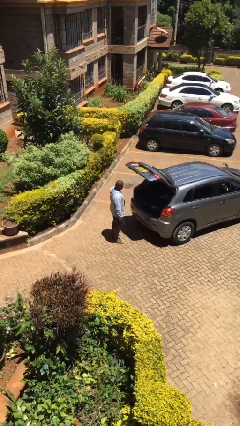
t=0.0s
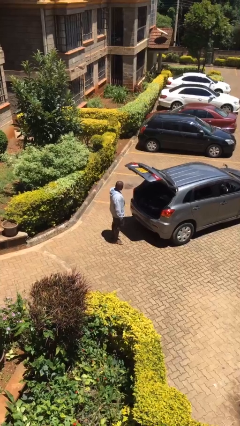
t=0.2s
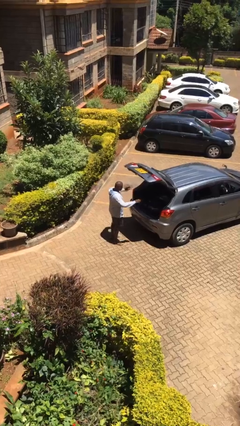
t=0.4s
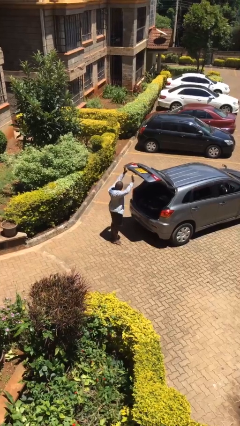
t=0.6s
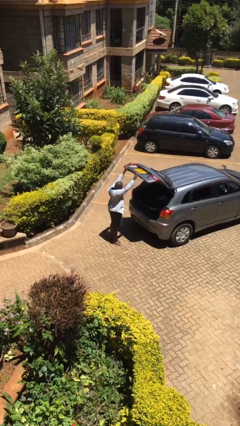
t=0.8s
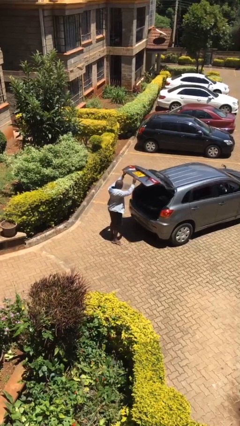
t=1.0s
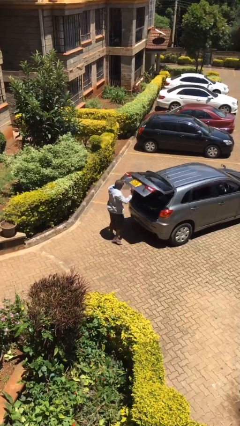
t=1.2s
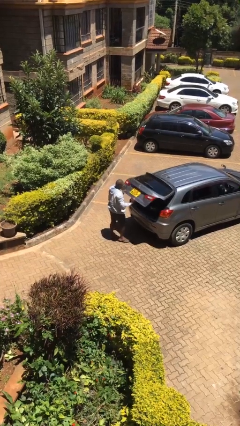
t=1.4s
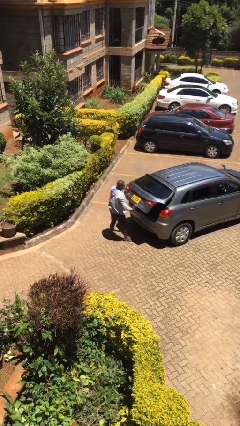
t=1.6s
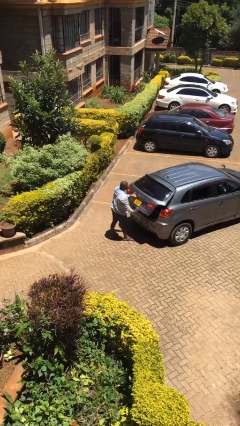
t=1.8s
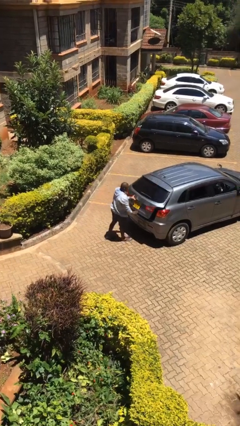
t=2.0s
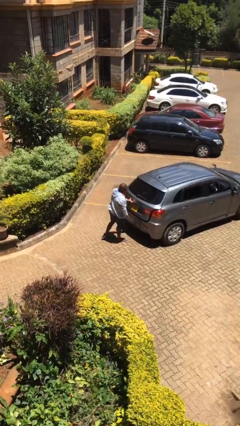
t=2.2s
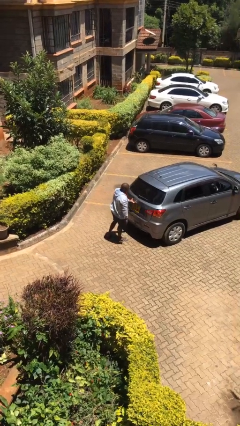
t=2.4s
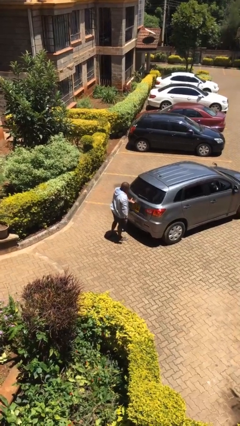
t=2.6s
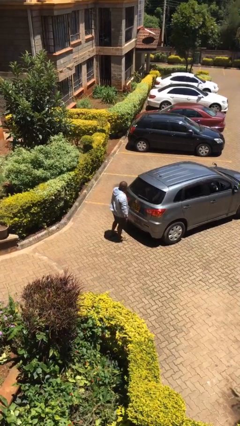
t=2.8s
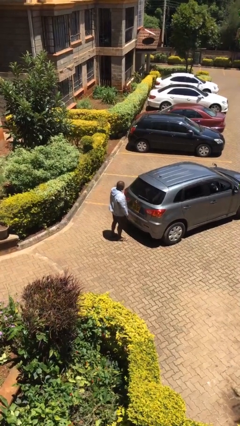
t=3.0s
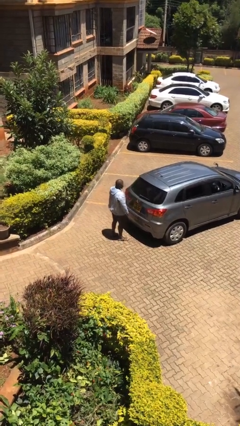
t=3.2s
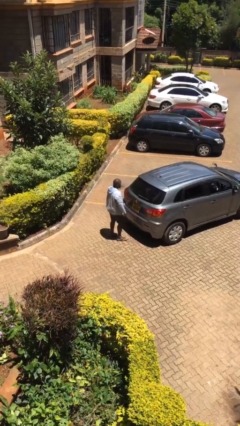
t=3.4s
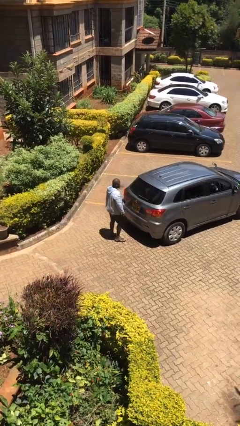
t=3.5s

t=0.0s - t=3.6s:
person closes car trunk

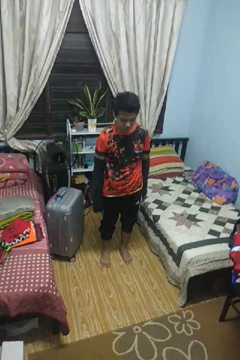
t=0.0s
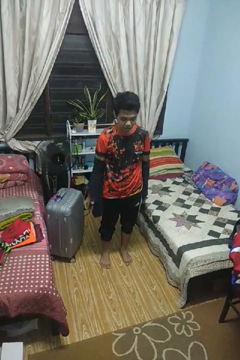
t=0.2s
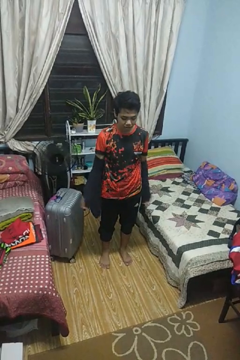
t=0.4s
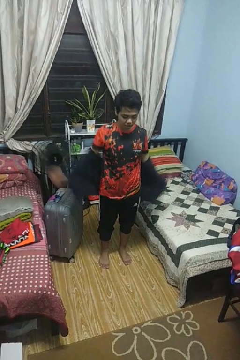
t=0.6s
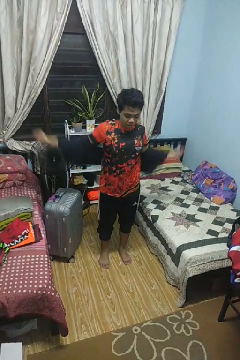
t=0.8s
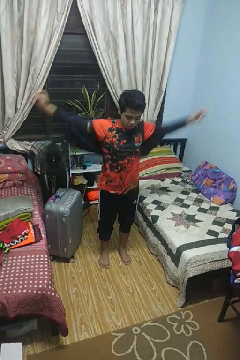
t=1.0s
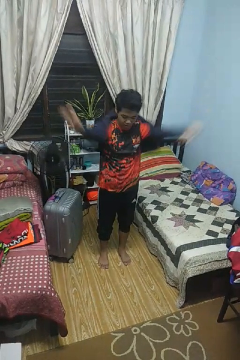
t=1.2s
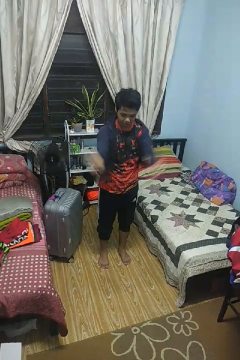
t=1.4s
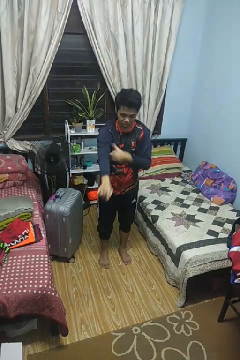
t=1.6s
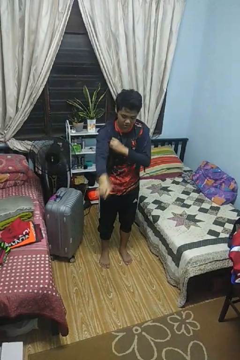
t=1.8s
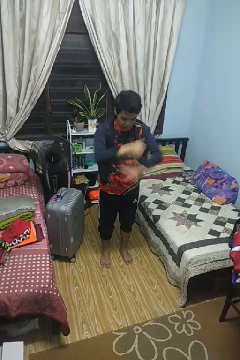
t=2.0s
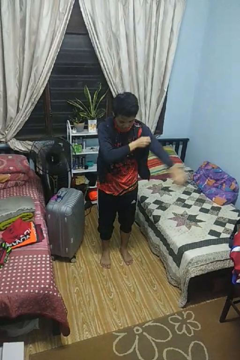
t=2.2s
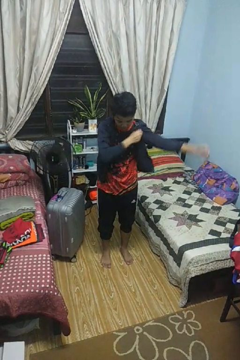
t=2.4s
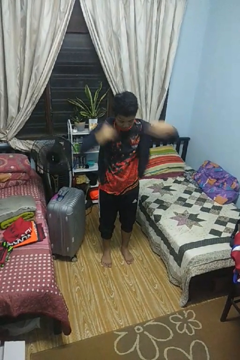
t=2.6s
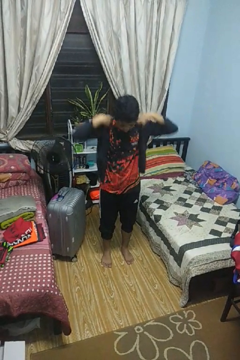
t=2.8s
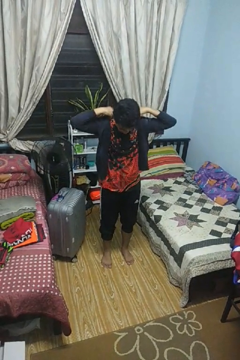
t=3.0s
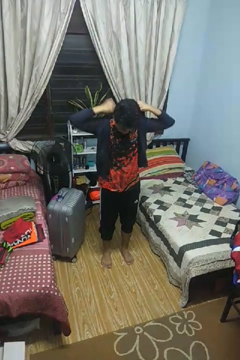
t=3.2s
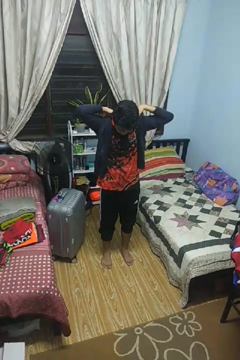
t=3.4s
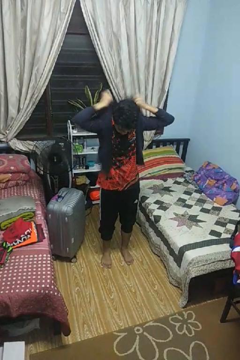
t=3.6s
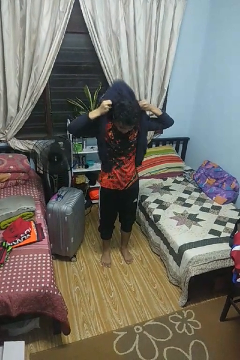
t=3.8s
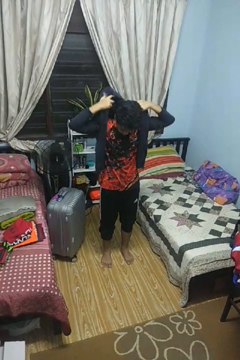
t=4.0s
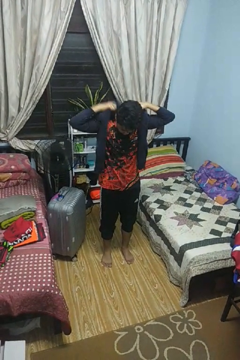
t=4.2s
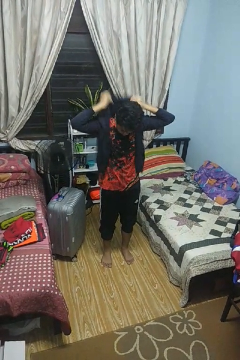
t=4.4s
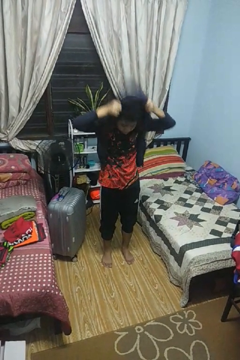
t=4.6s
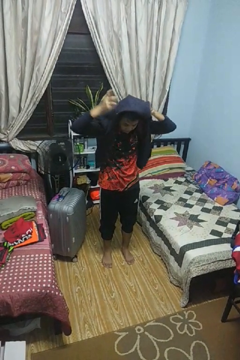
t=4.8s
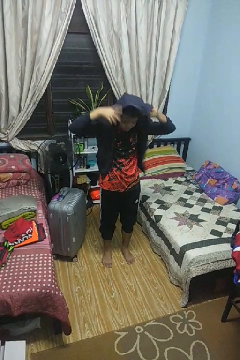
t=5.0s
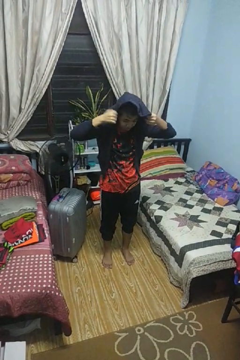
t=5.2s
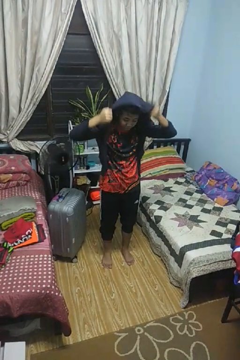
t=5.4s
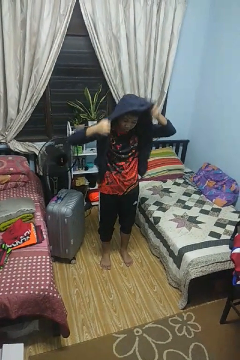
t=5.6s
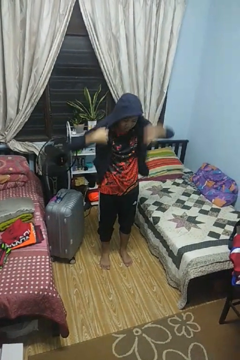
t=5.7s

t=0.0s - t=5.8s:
person puts on hoodie

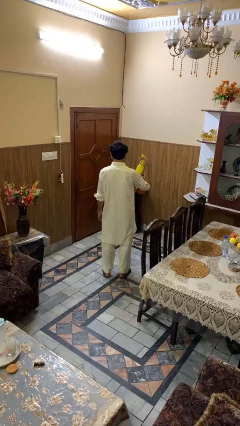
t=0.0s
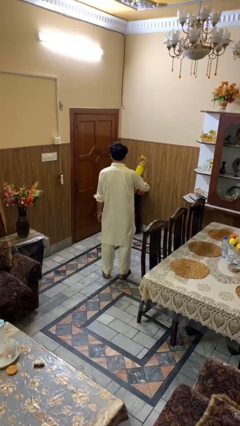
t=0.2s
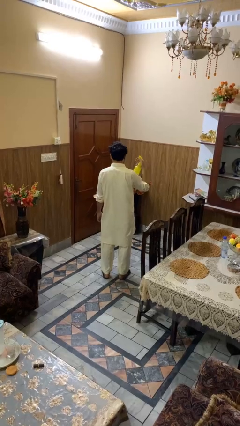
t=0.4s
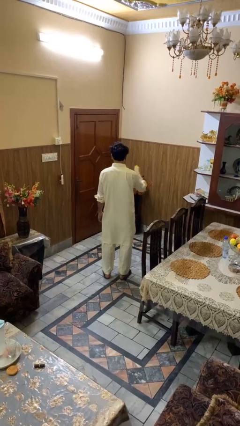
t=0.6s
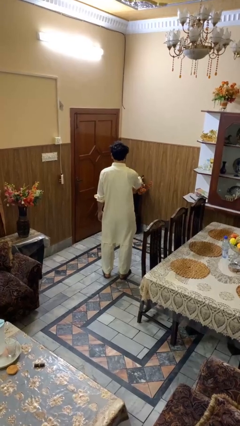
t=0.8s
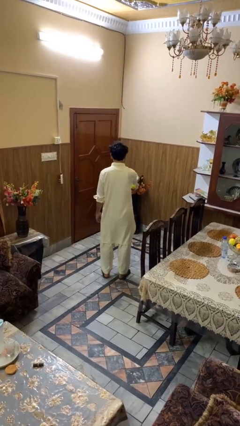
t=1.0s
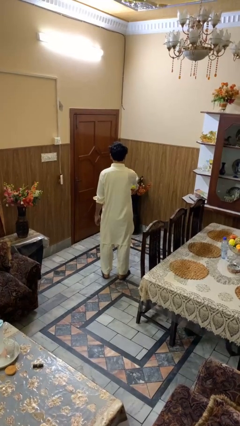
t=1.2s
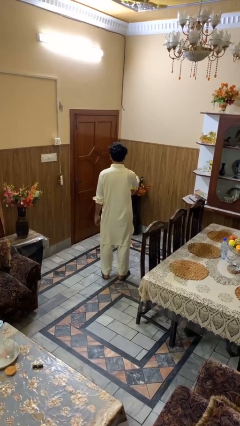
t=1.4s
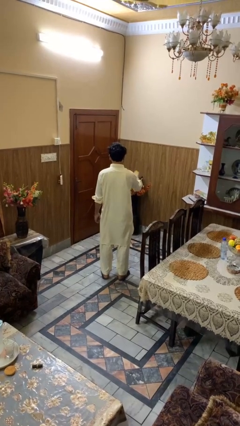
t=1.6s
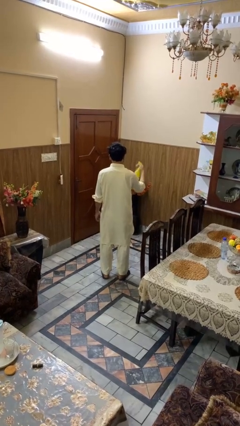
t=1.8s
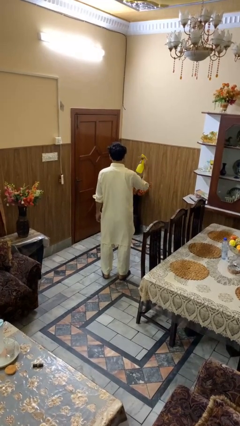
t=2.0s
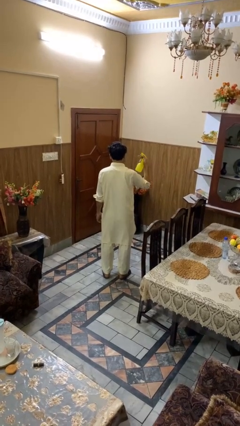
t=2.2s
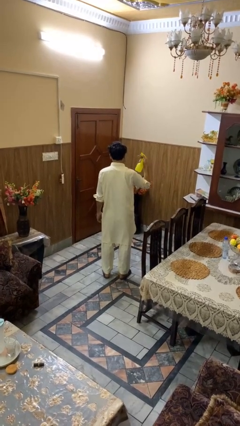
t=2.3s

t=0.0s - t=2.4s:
person sprays from bottle

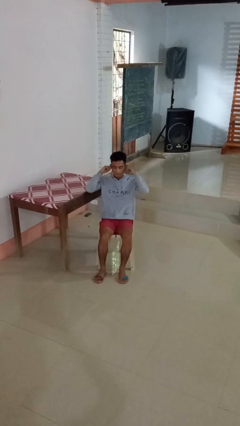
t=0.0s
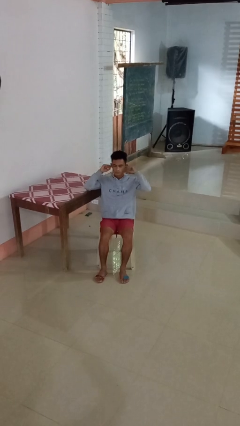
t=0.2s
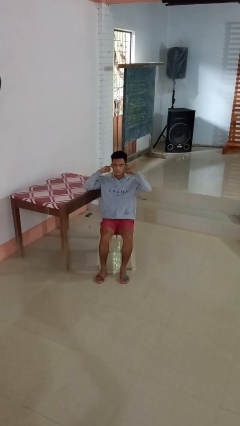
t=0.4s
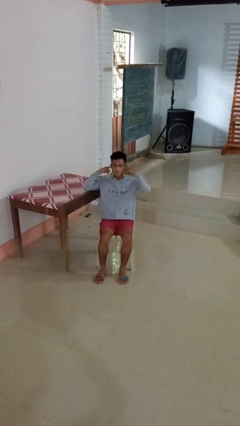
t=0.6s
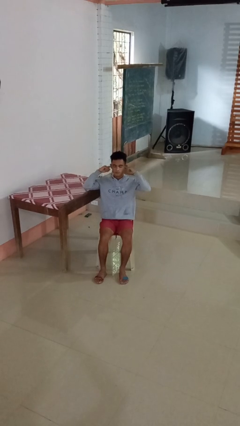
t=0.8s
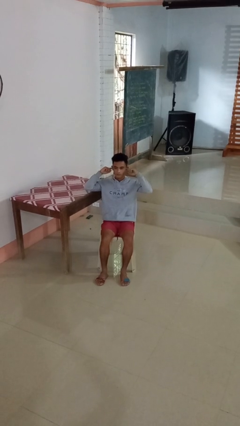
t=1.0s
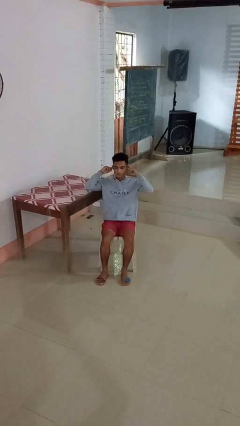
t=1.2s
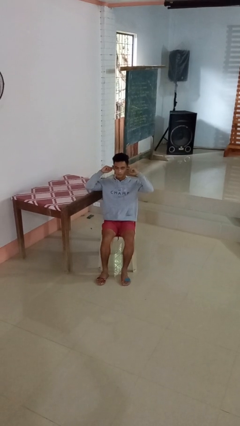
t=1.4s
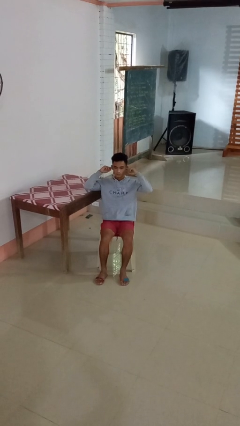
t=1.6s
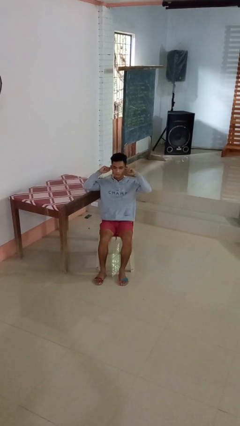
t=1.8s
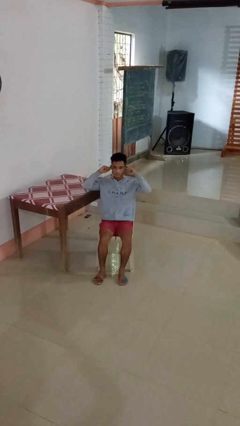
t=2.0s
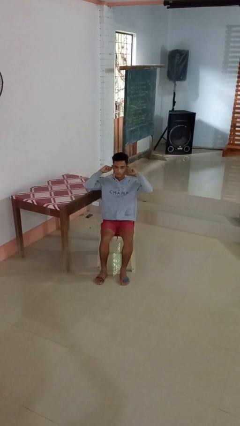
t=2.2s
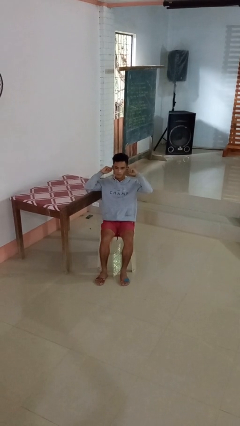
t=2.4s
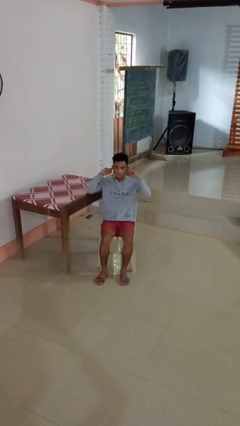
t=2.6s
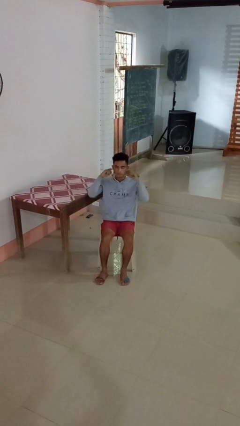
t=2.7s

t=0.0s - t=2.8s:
person puts fingers in ear

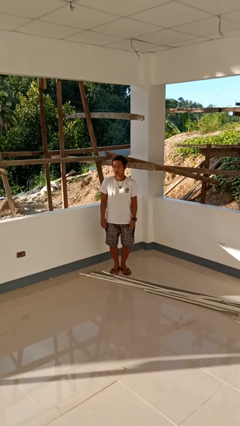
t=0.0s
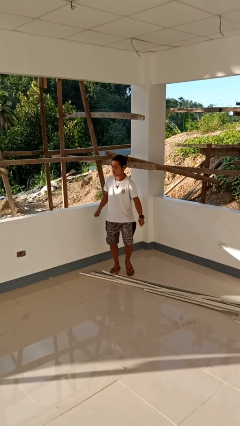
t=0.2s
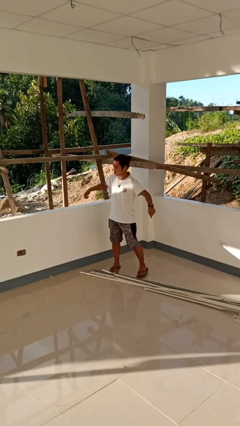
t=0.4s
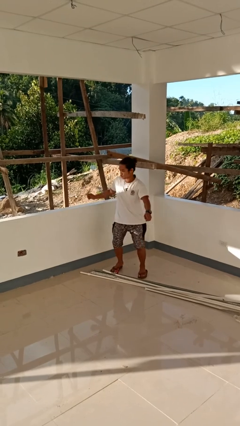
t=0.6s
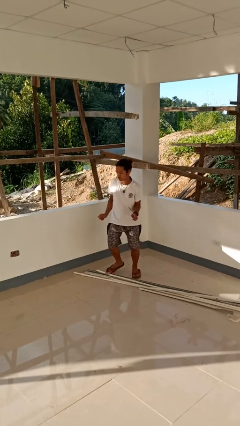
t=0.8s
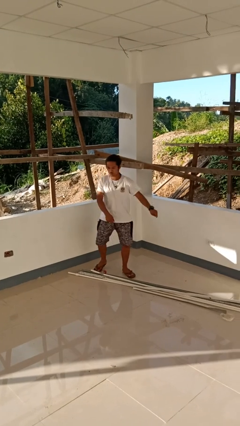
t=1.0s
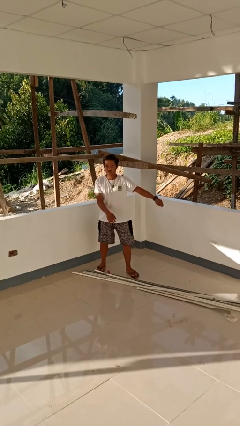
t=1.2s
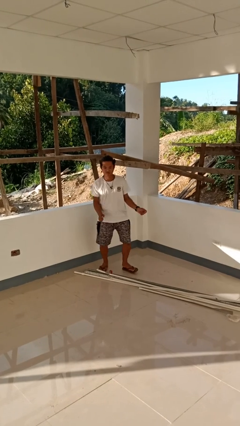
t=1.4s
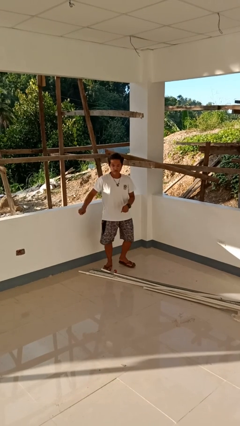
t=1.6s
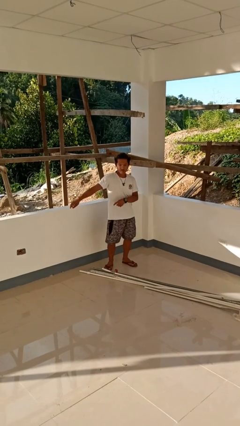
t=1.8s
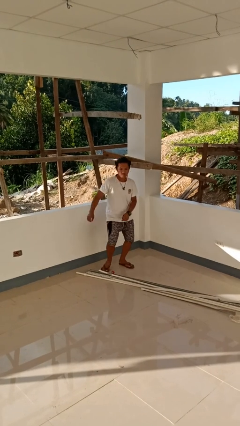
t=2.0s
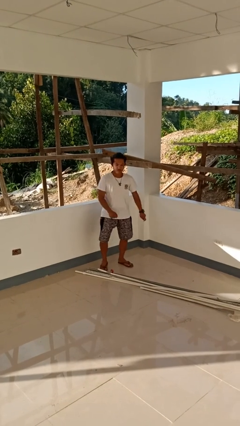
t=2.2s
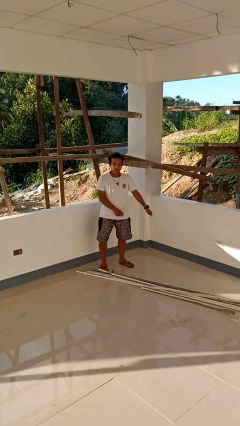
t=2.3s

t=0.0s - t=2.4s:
person dances in place

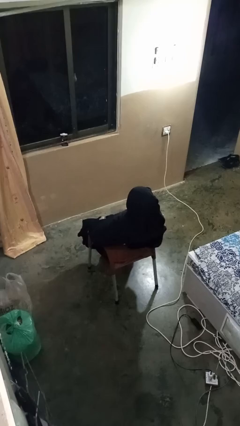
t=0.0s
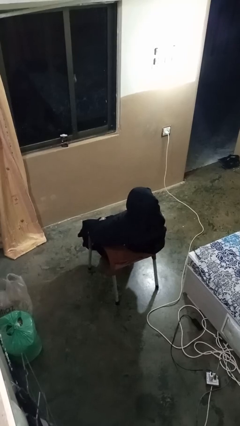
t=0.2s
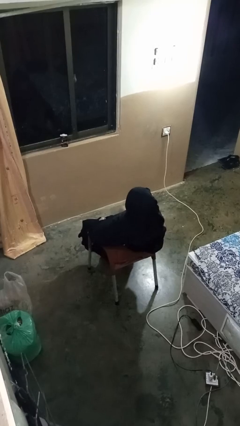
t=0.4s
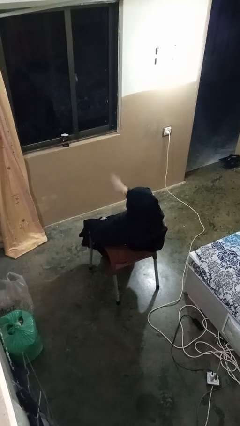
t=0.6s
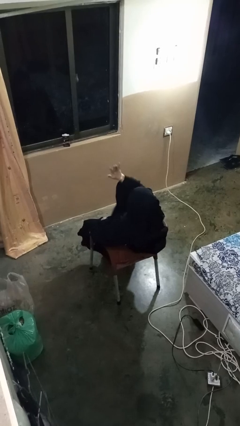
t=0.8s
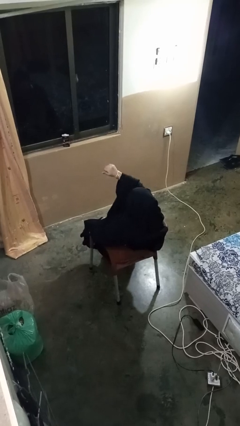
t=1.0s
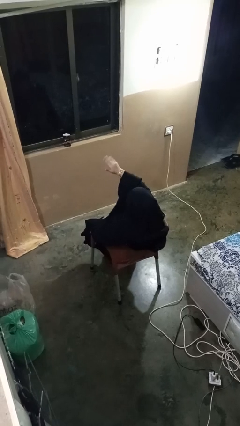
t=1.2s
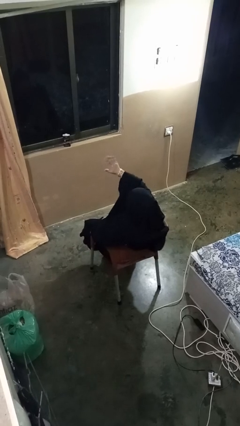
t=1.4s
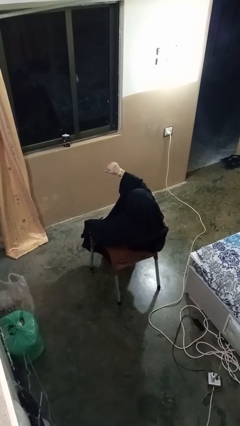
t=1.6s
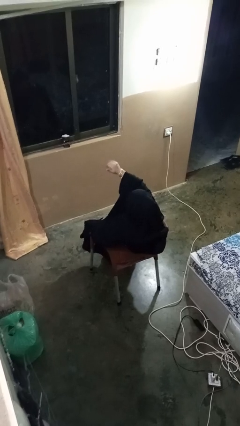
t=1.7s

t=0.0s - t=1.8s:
person gestures come here
